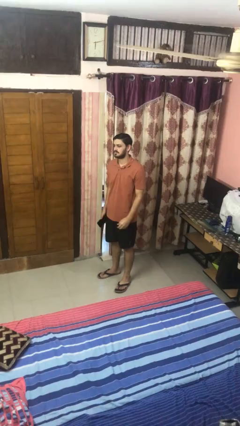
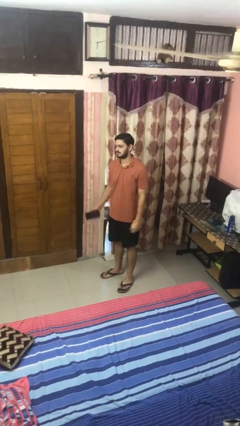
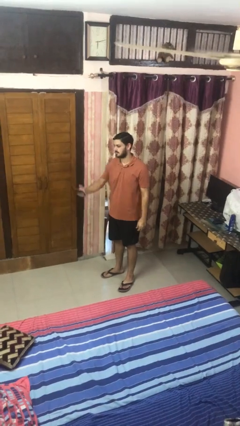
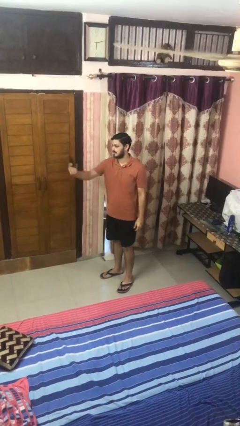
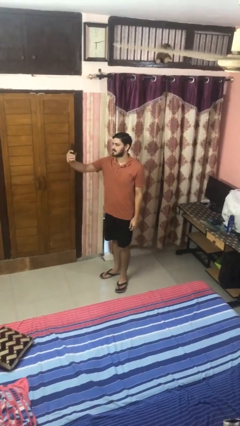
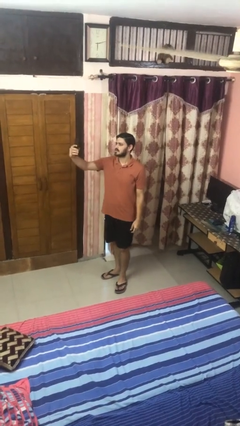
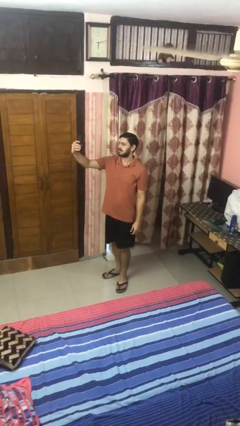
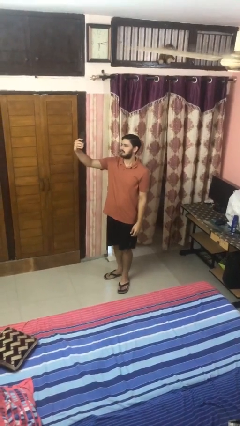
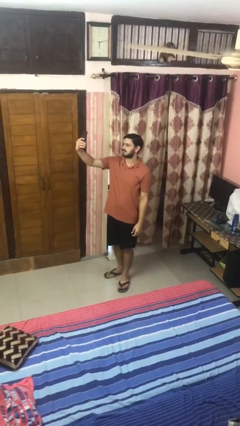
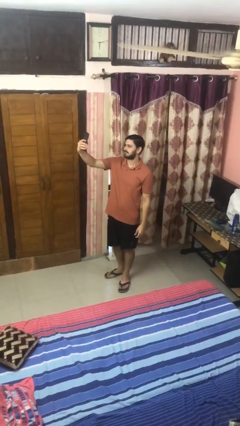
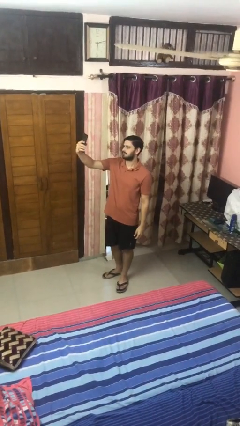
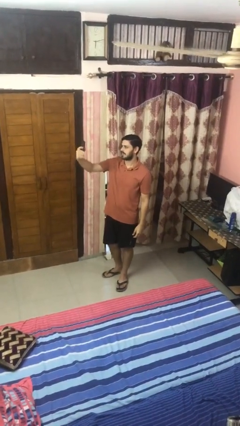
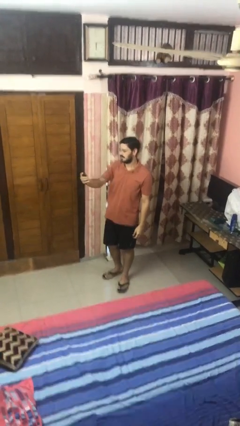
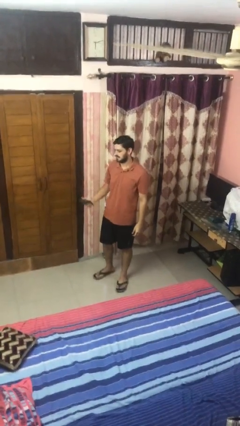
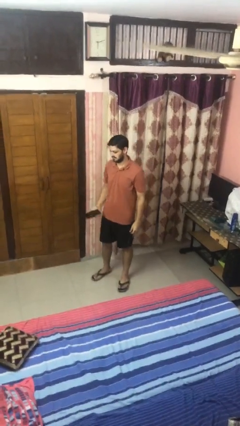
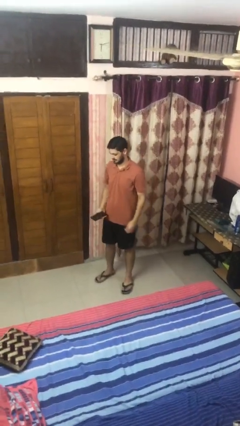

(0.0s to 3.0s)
person takes selfie

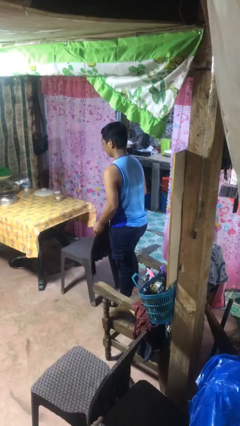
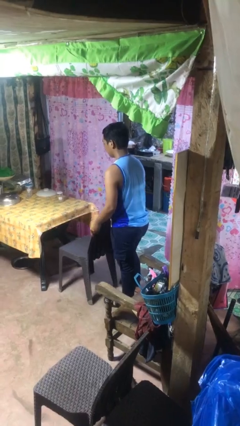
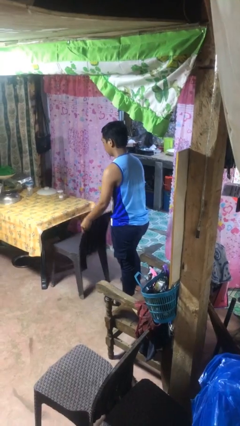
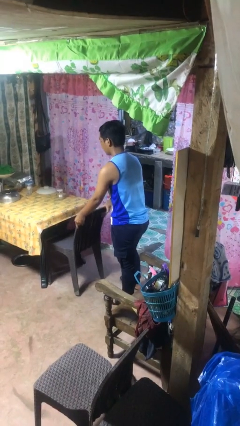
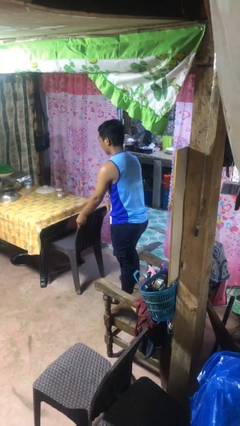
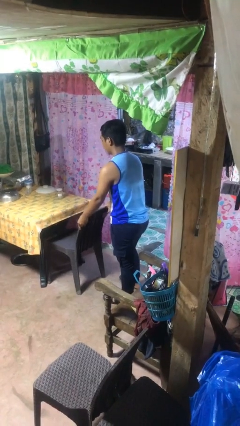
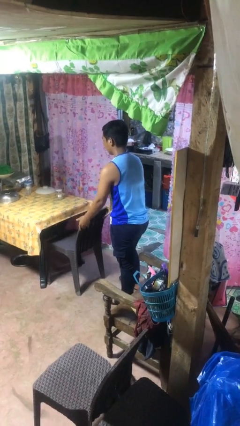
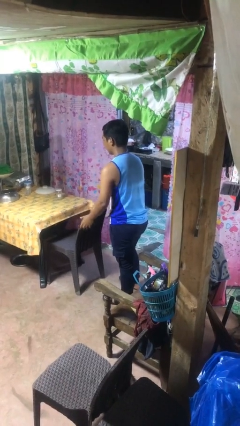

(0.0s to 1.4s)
person pushes in chair

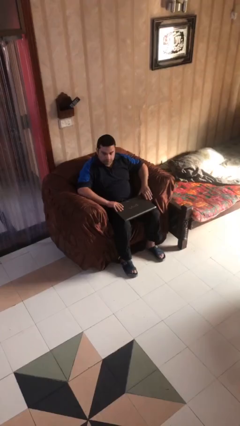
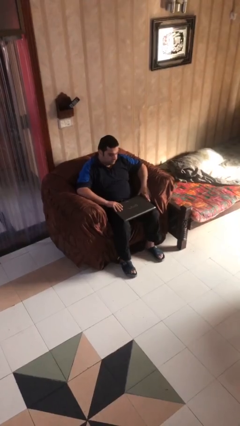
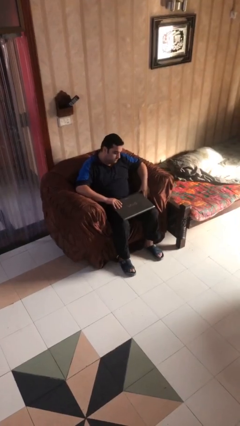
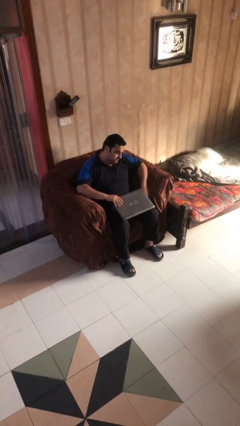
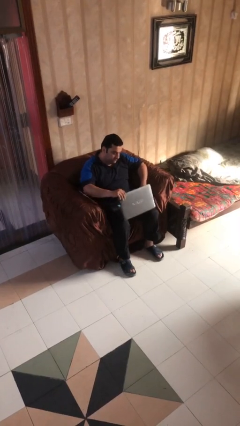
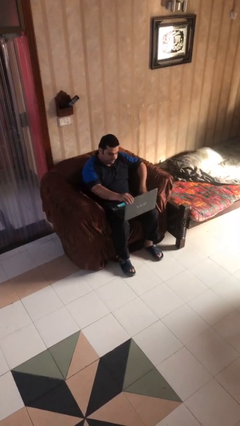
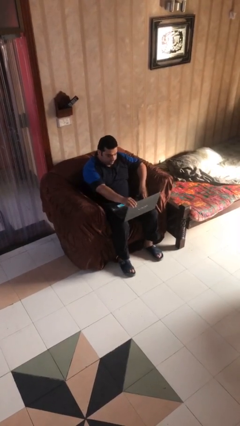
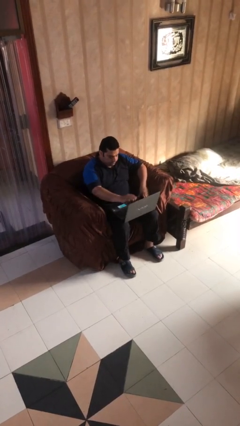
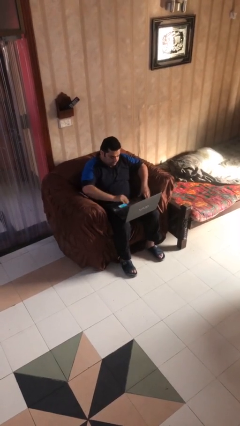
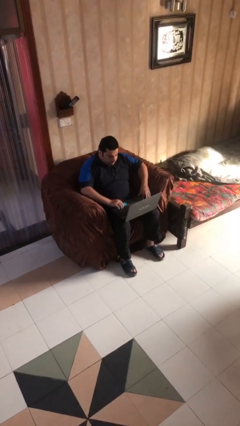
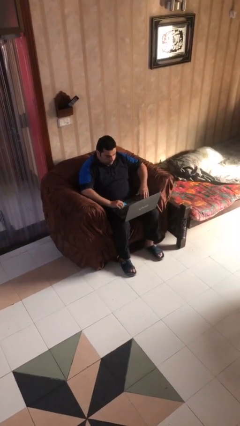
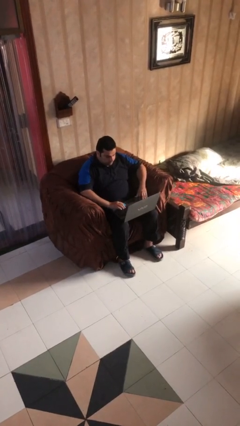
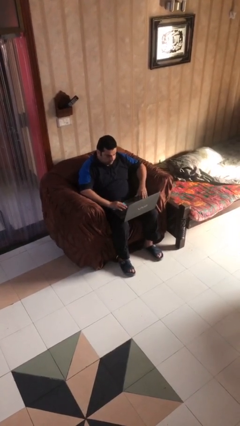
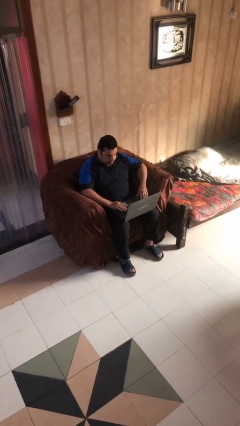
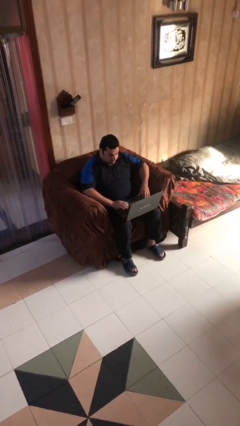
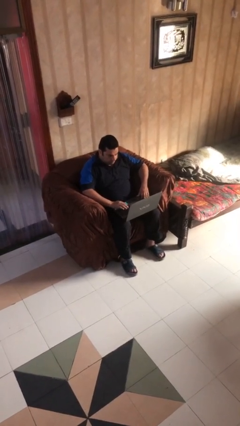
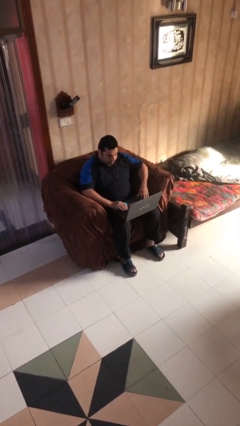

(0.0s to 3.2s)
person opens laptop

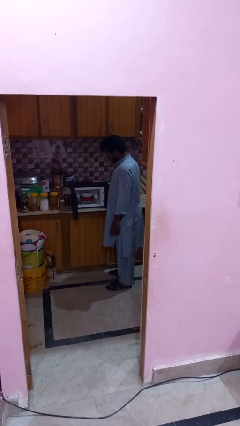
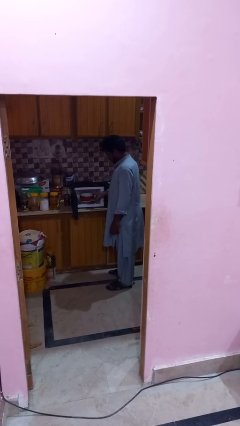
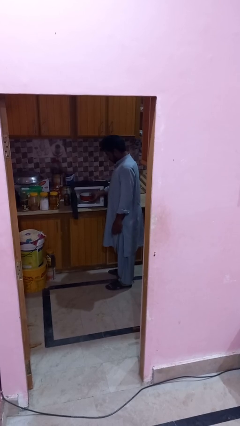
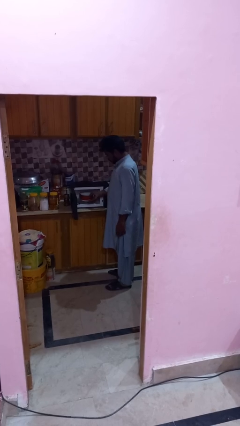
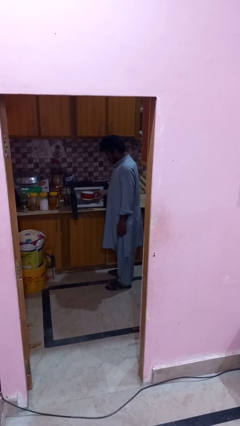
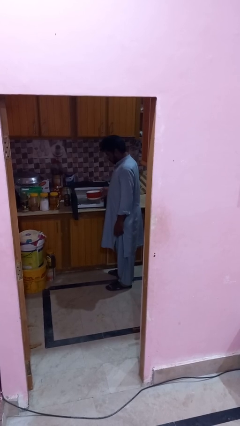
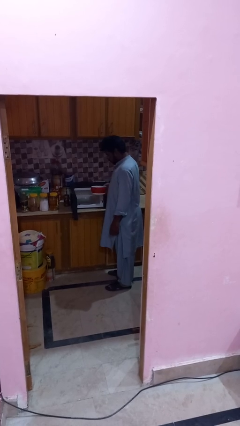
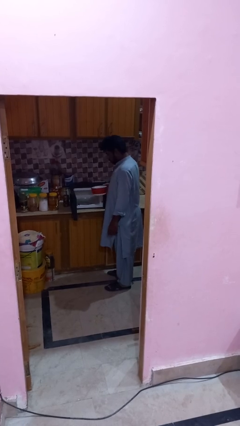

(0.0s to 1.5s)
person takes object from microwave

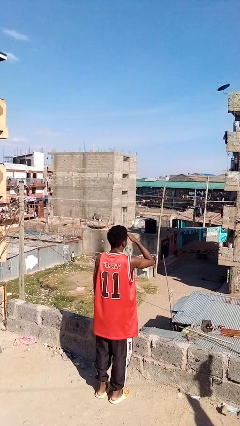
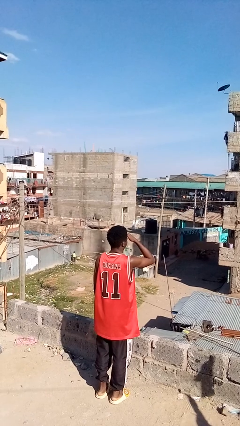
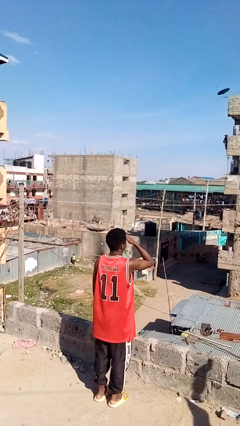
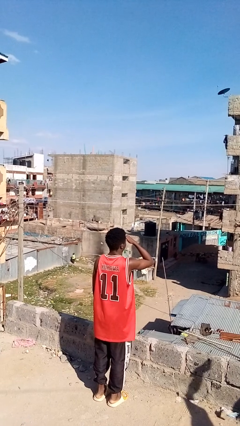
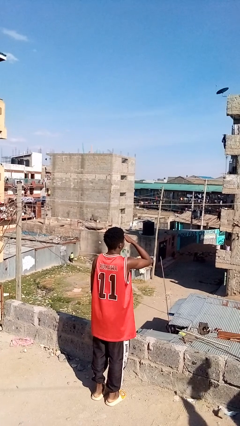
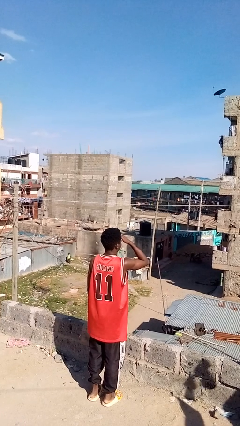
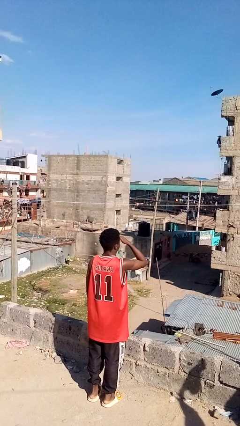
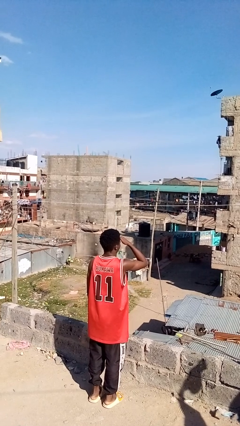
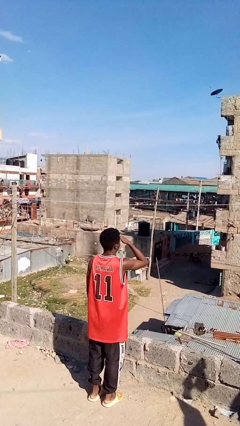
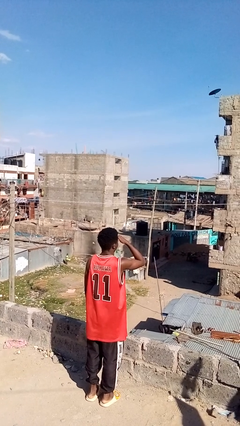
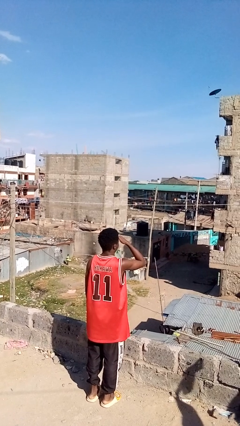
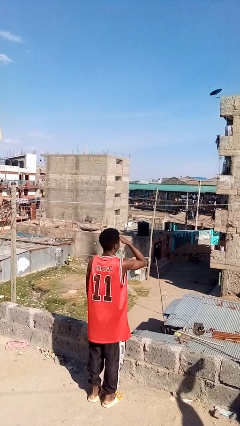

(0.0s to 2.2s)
person shades eyes

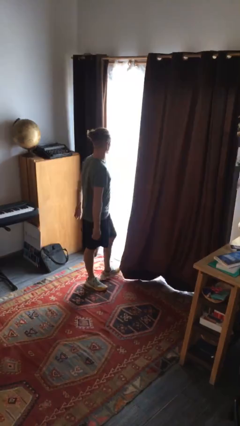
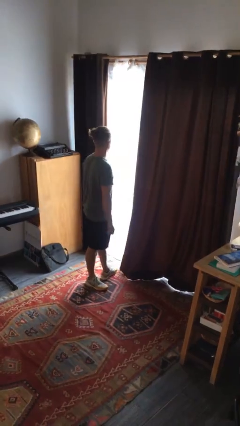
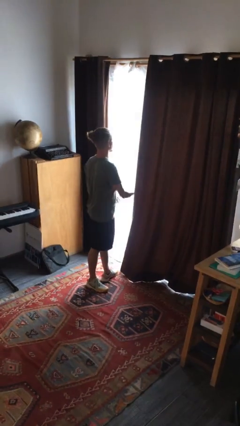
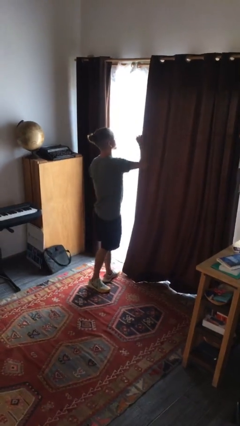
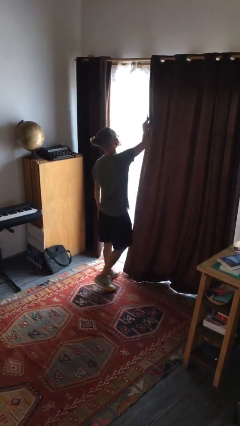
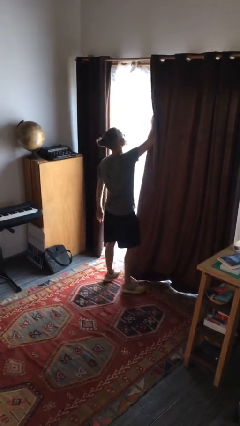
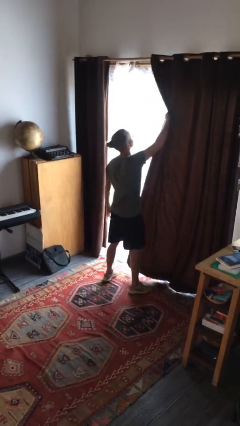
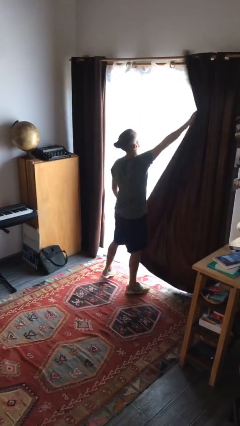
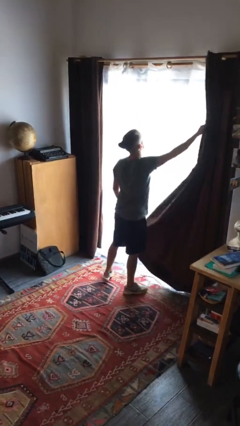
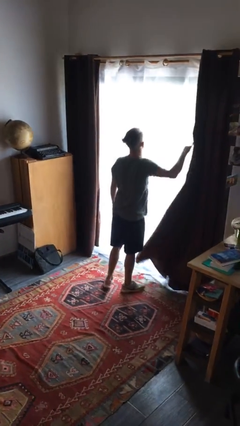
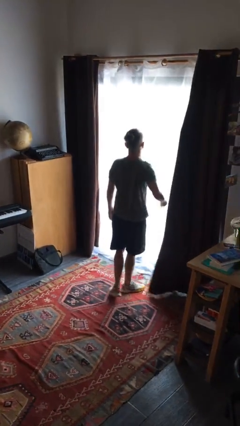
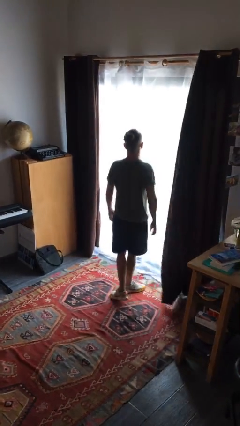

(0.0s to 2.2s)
person opens curtains

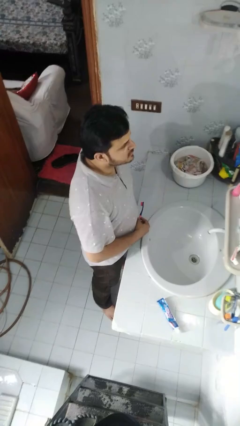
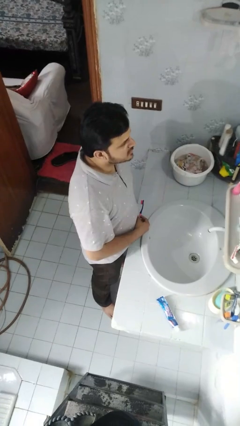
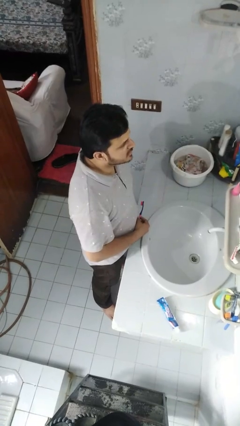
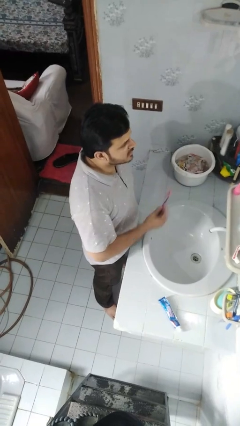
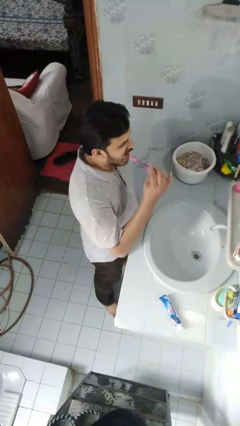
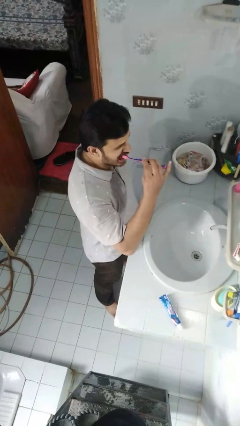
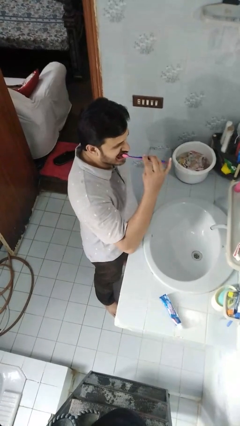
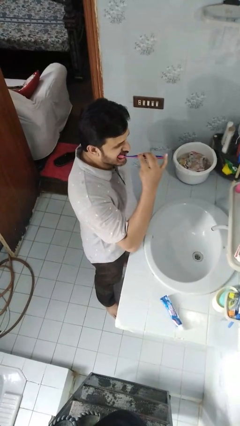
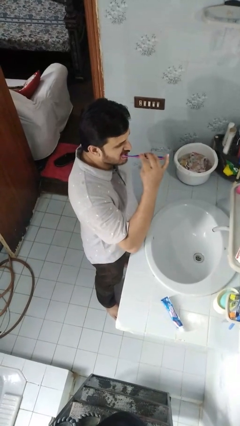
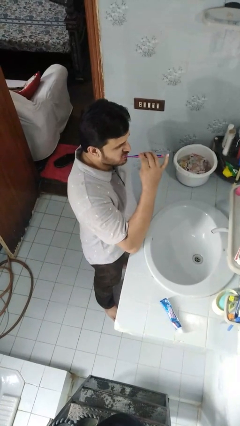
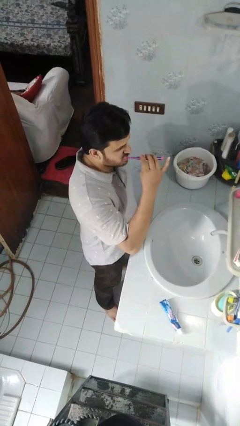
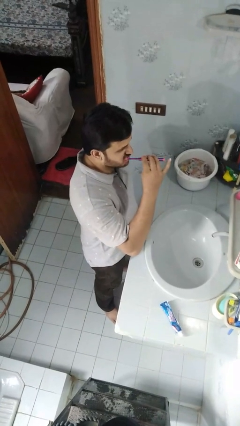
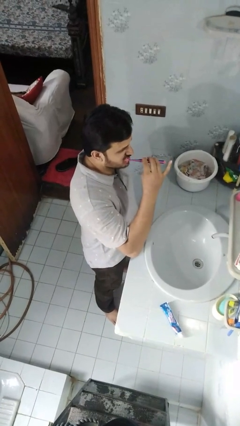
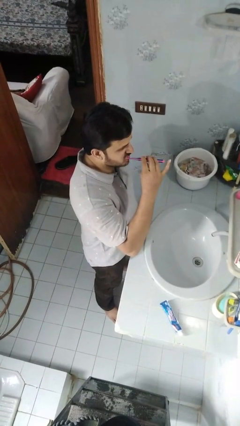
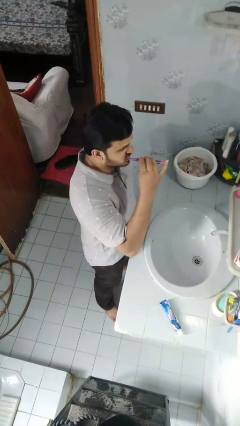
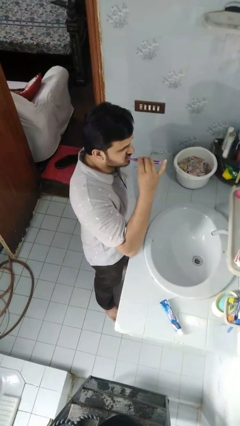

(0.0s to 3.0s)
person brushes teeth

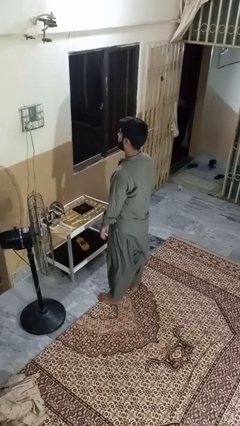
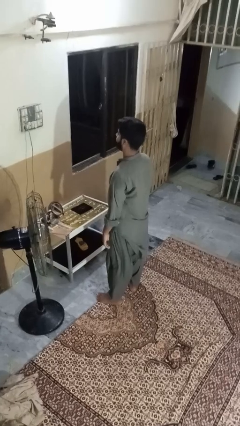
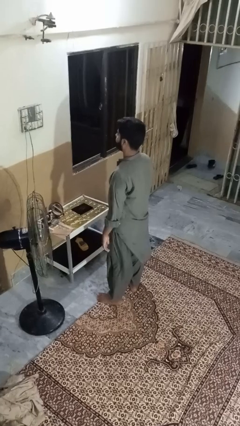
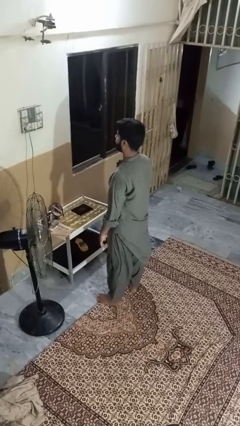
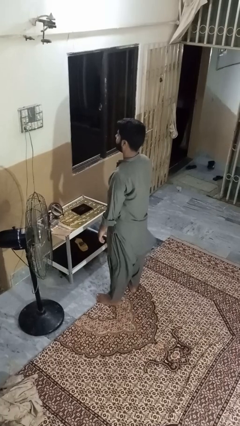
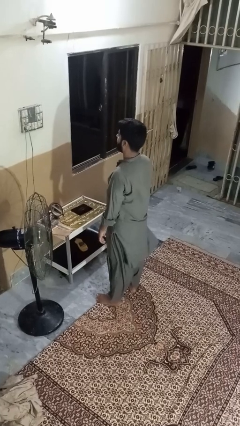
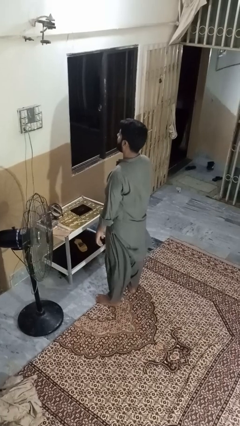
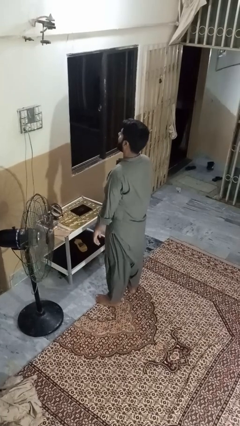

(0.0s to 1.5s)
person yawns
